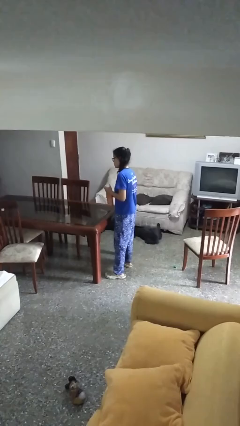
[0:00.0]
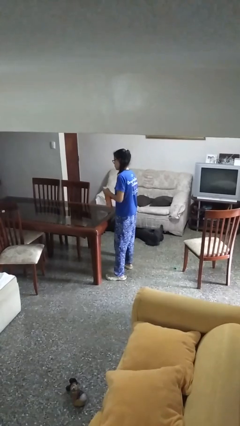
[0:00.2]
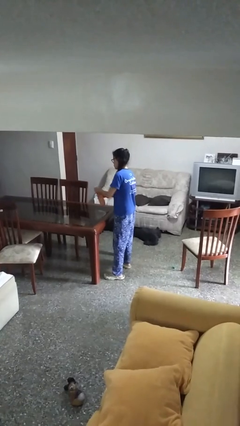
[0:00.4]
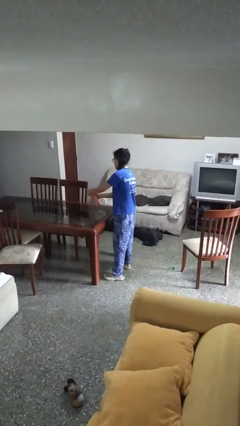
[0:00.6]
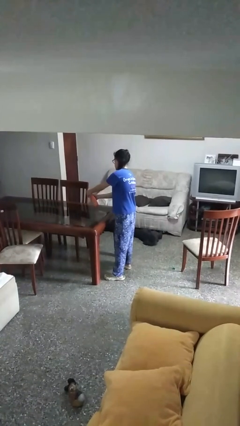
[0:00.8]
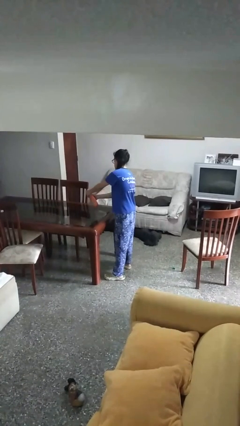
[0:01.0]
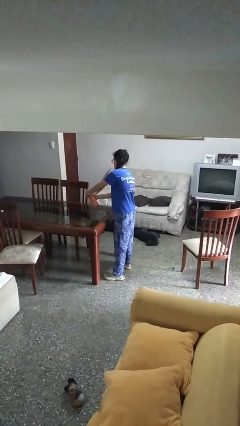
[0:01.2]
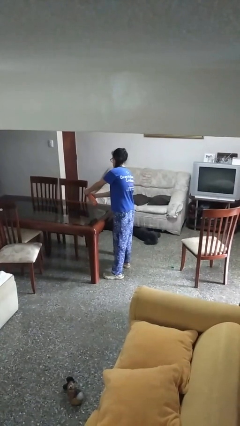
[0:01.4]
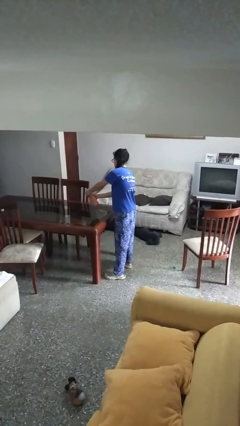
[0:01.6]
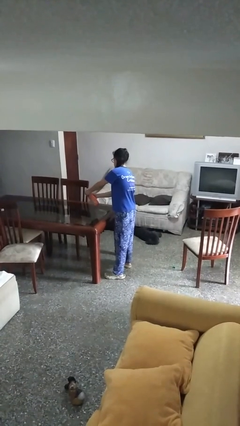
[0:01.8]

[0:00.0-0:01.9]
person sprays from bottle

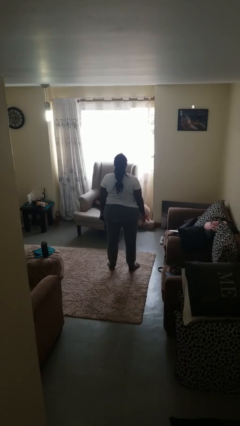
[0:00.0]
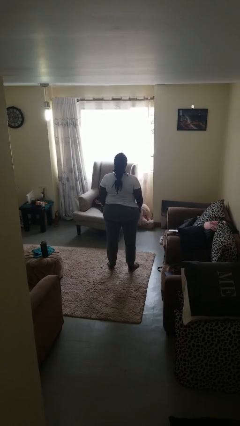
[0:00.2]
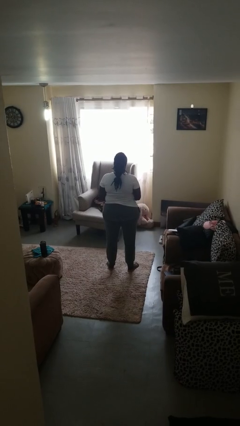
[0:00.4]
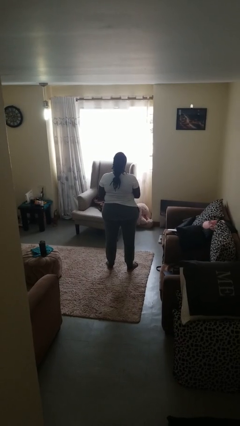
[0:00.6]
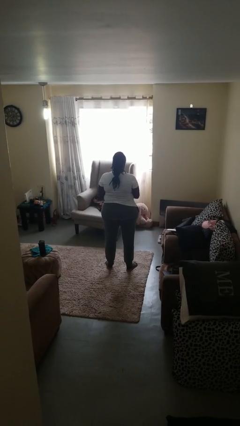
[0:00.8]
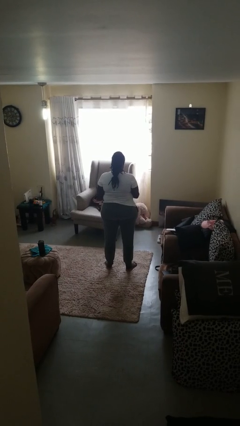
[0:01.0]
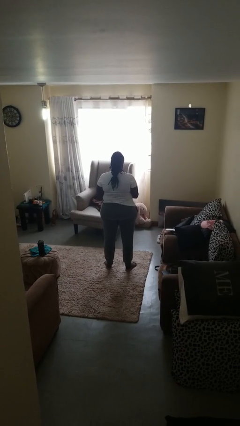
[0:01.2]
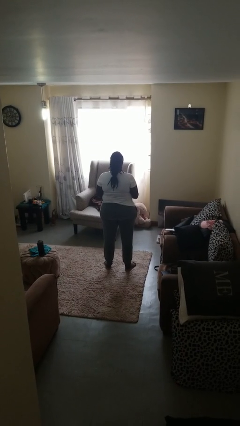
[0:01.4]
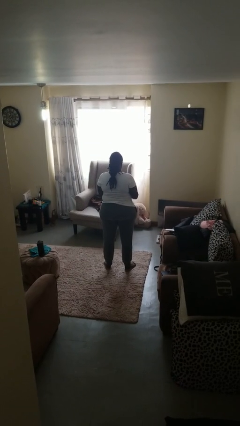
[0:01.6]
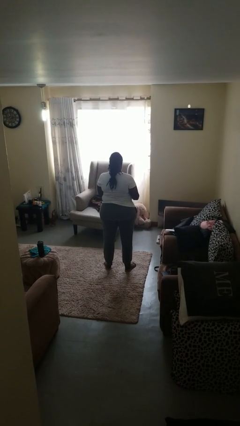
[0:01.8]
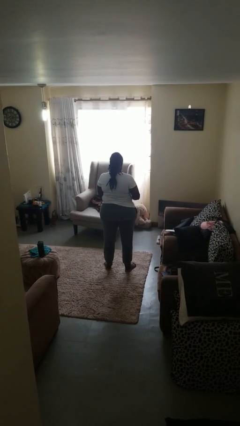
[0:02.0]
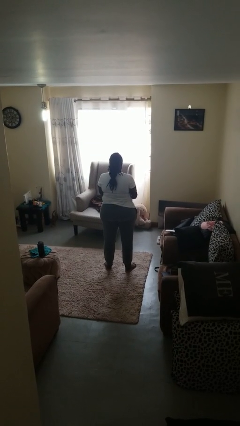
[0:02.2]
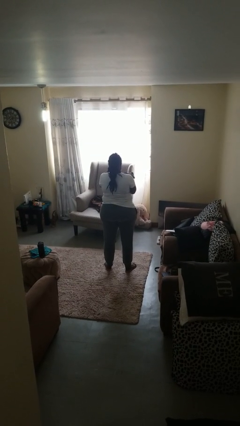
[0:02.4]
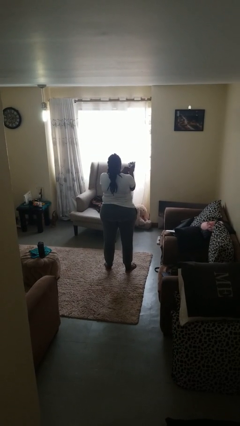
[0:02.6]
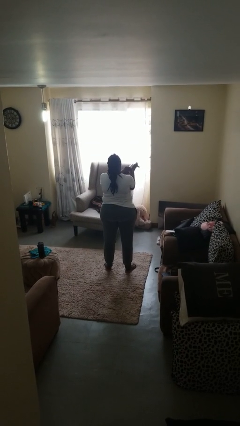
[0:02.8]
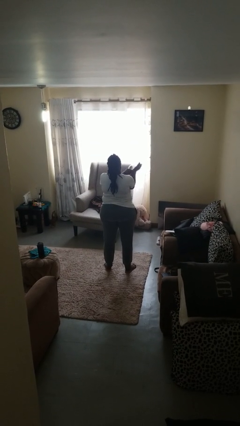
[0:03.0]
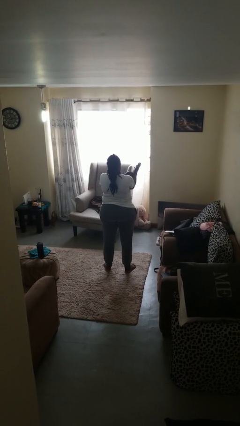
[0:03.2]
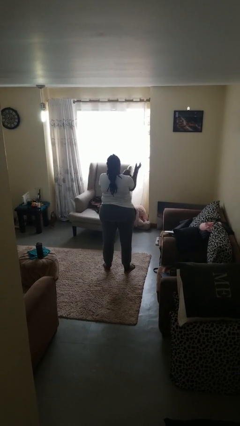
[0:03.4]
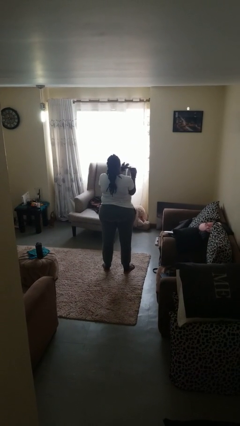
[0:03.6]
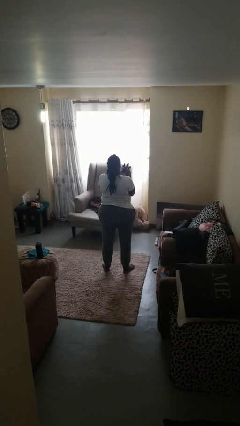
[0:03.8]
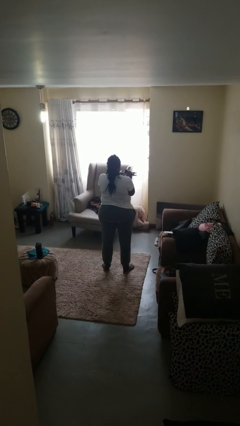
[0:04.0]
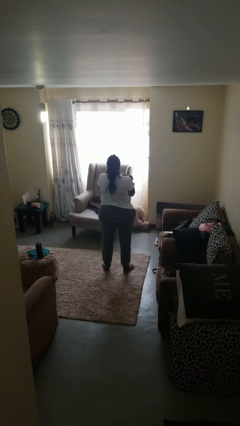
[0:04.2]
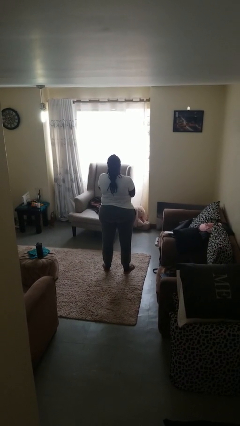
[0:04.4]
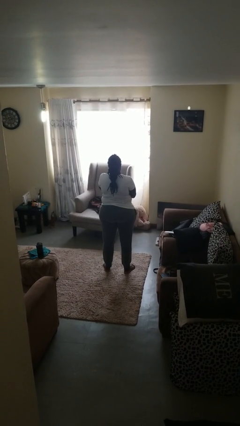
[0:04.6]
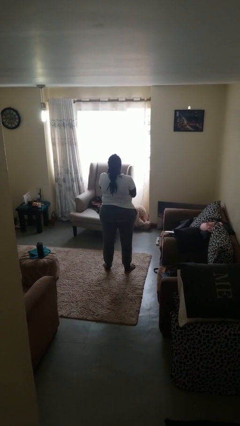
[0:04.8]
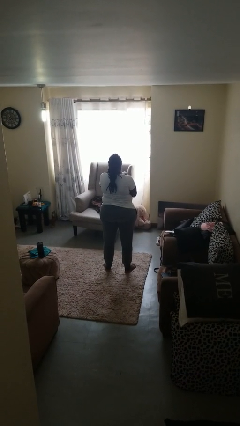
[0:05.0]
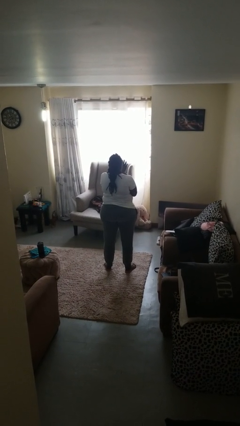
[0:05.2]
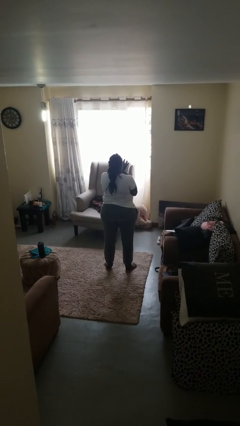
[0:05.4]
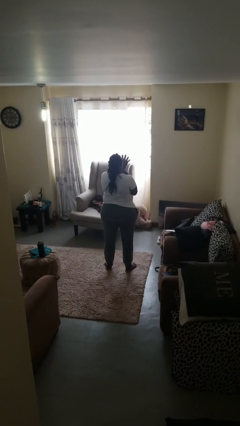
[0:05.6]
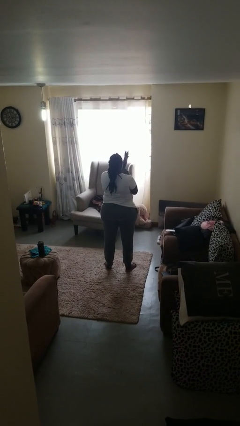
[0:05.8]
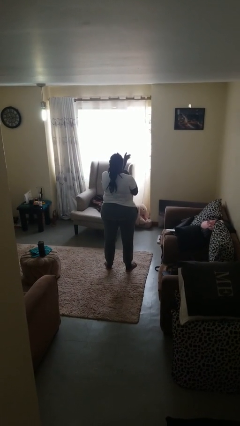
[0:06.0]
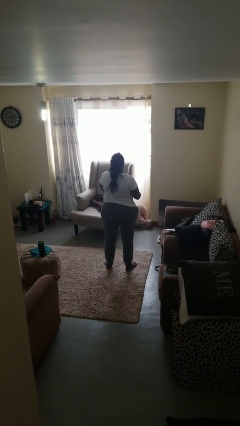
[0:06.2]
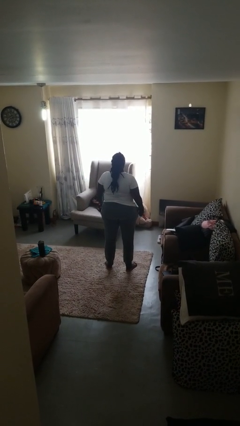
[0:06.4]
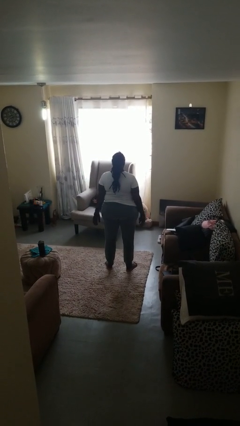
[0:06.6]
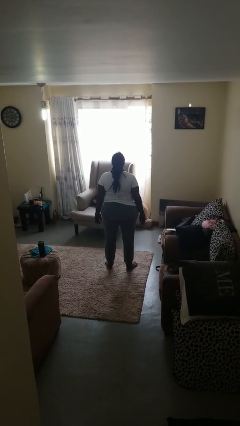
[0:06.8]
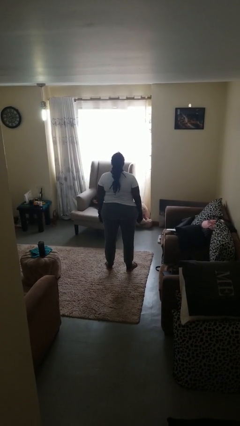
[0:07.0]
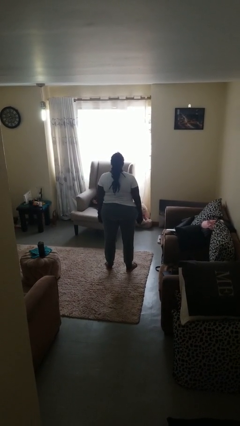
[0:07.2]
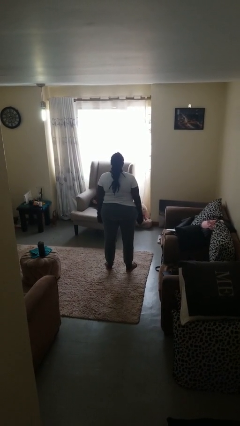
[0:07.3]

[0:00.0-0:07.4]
person puts on gloves

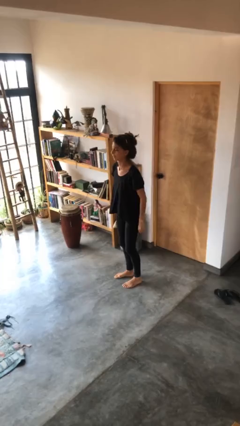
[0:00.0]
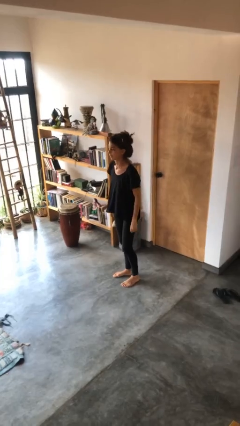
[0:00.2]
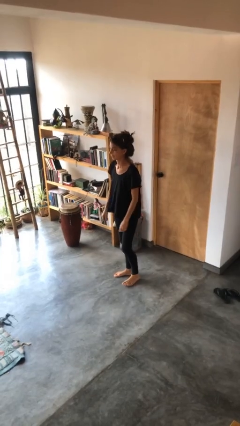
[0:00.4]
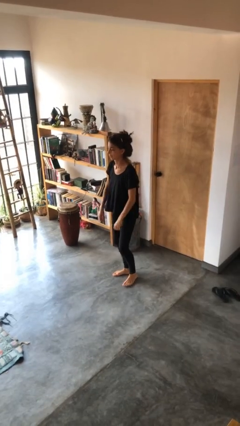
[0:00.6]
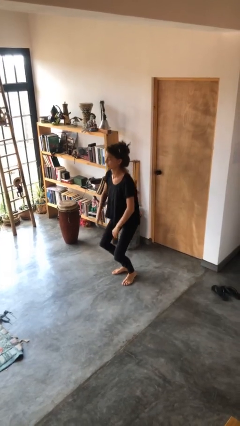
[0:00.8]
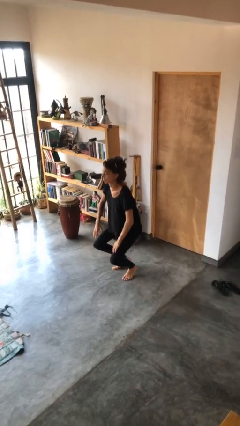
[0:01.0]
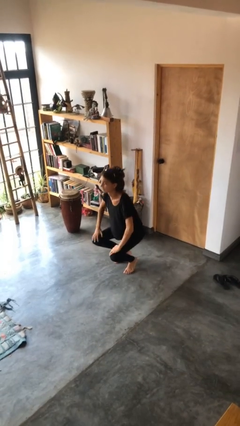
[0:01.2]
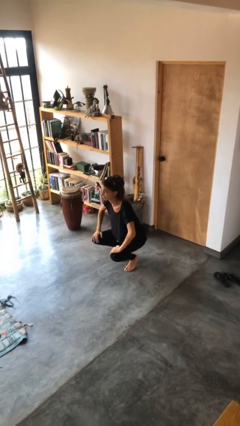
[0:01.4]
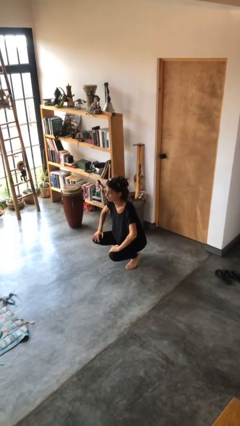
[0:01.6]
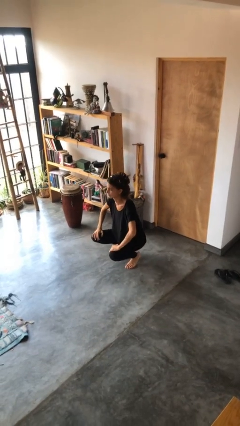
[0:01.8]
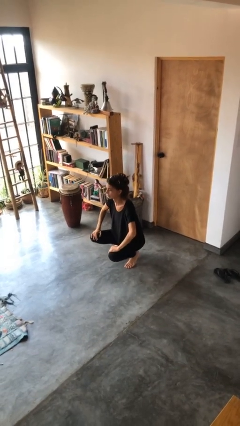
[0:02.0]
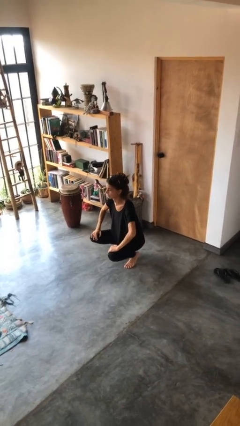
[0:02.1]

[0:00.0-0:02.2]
person squats

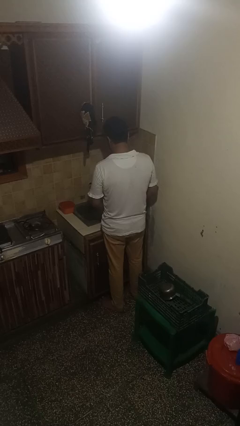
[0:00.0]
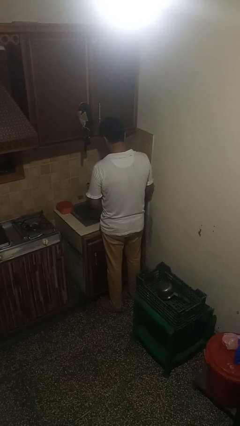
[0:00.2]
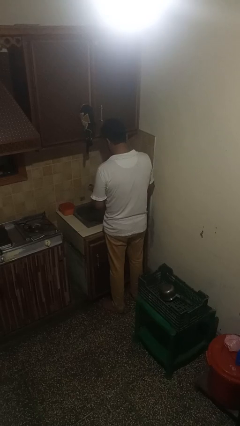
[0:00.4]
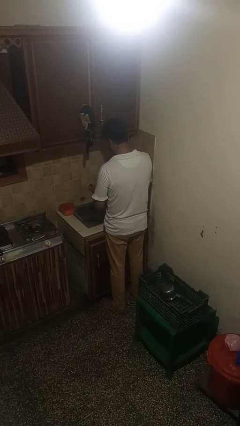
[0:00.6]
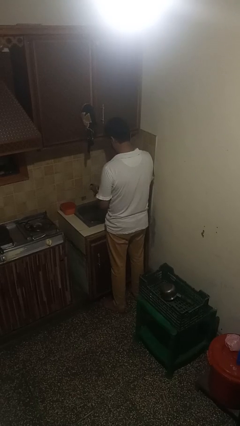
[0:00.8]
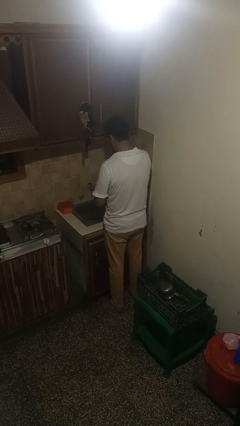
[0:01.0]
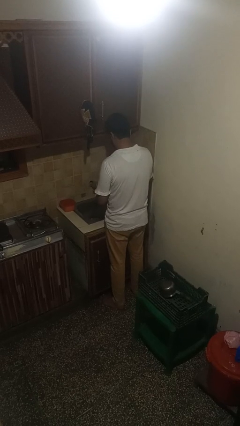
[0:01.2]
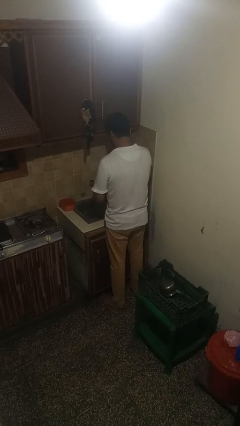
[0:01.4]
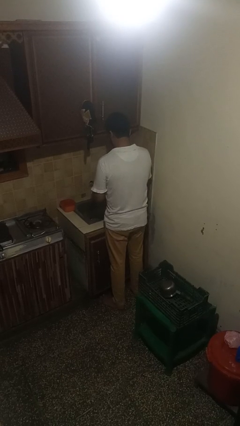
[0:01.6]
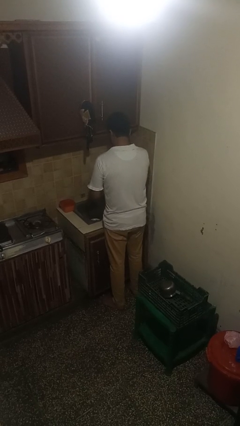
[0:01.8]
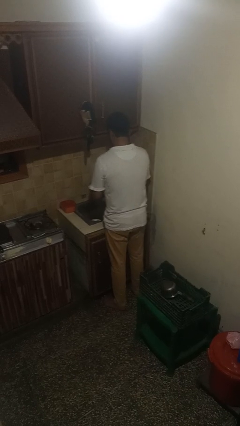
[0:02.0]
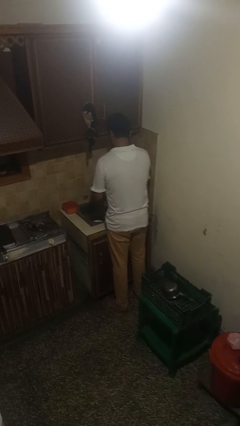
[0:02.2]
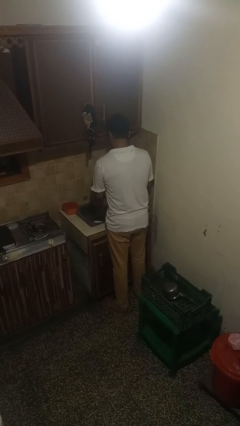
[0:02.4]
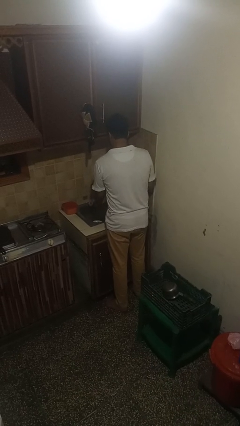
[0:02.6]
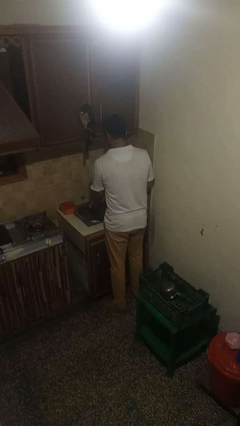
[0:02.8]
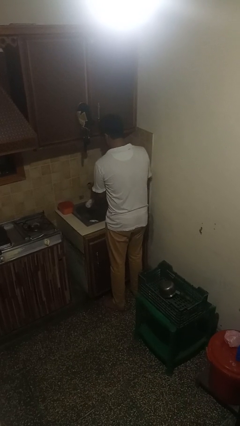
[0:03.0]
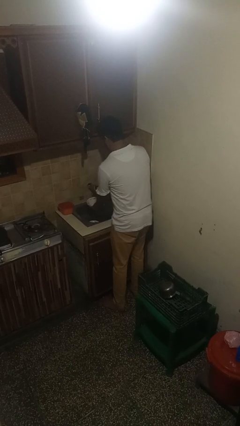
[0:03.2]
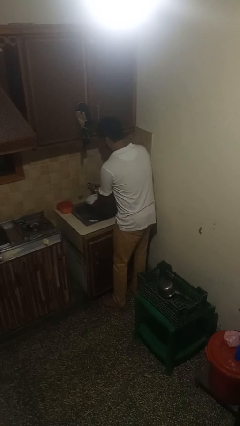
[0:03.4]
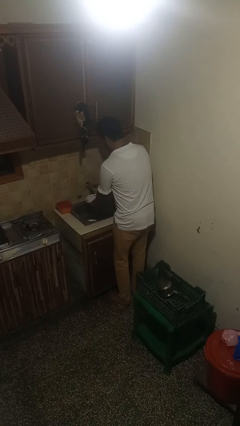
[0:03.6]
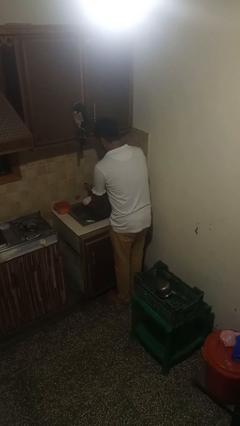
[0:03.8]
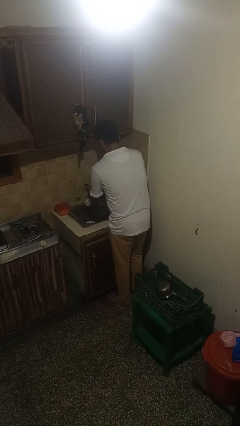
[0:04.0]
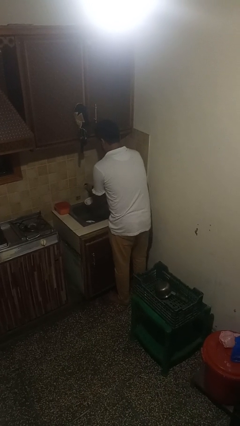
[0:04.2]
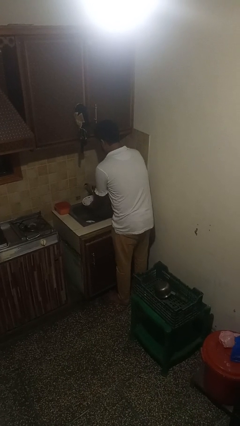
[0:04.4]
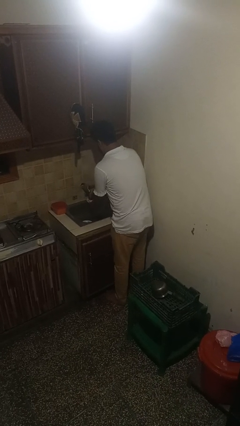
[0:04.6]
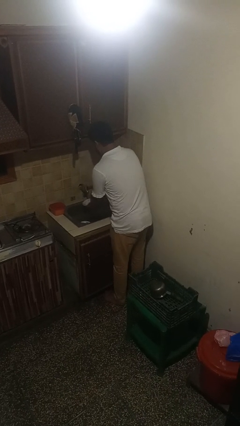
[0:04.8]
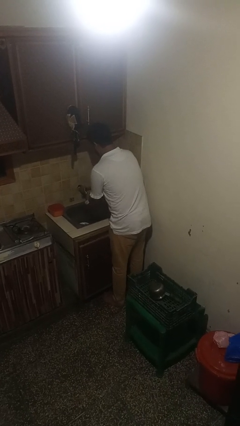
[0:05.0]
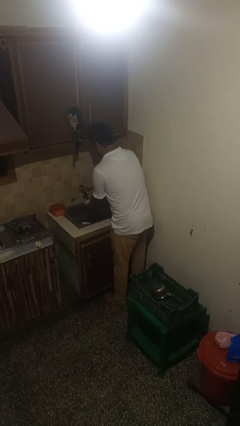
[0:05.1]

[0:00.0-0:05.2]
person washes dish

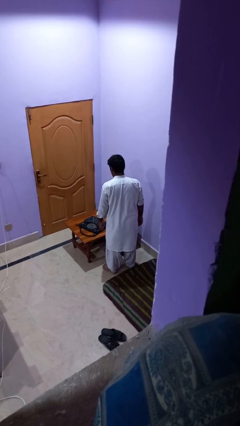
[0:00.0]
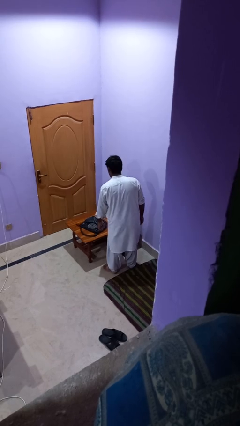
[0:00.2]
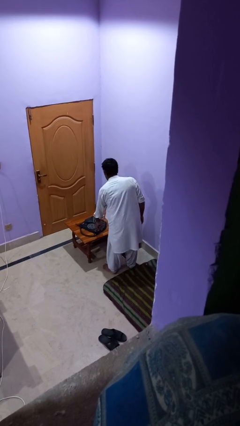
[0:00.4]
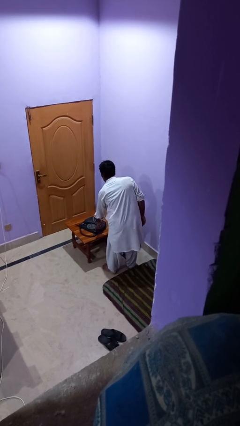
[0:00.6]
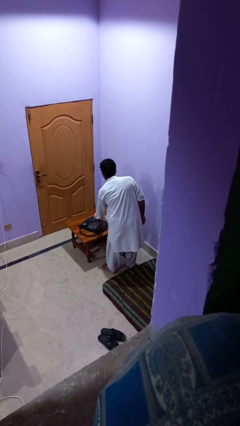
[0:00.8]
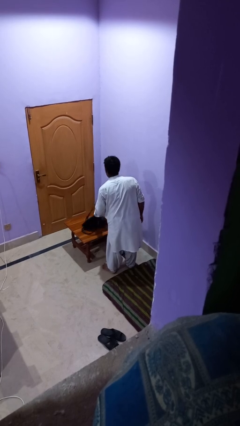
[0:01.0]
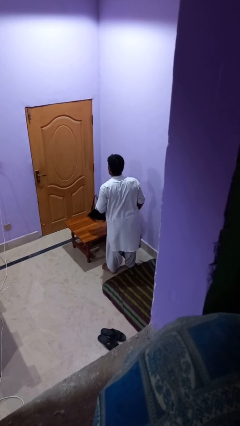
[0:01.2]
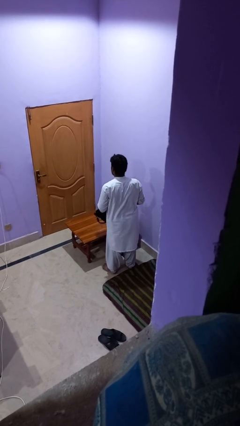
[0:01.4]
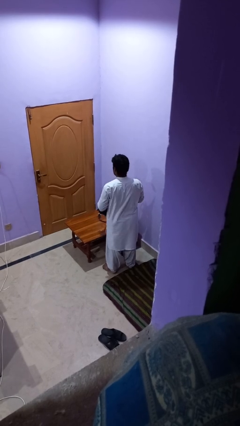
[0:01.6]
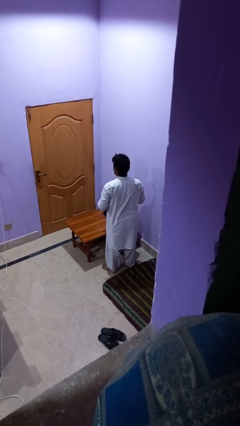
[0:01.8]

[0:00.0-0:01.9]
person picks up object from table
